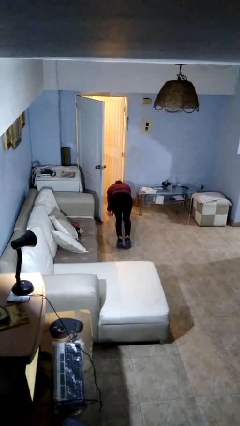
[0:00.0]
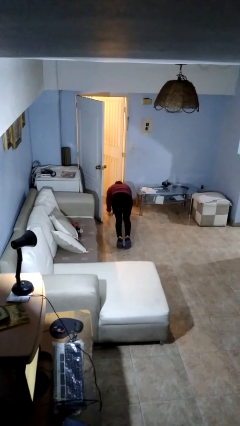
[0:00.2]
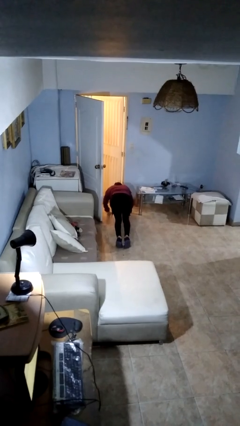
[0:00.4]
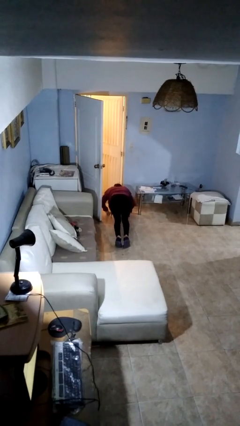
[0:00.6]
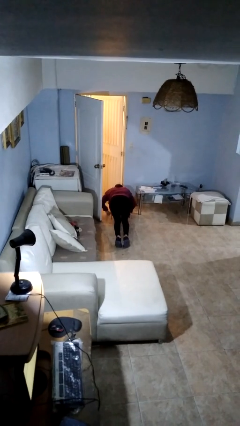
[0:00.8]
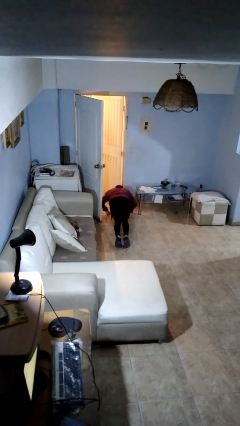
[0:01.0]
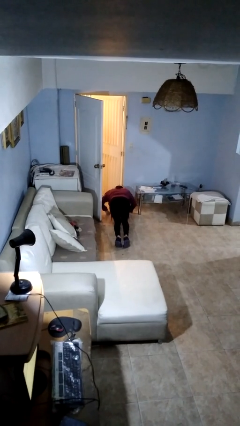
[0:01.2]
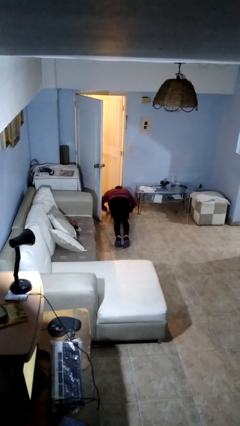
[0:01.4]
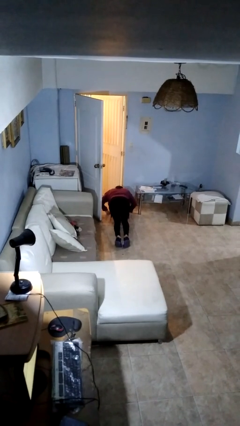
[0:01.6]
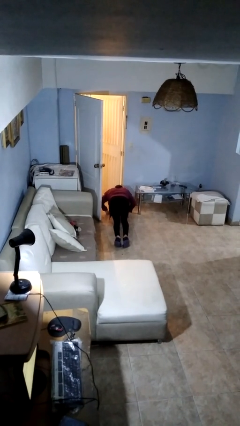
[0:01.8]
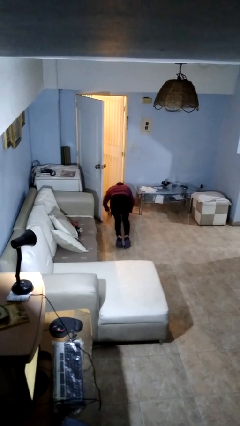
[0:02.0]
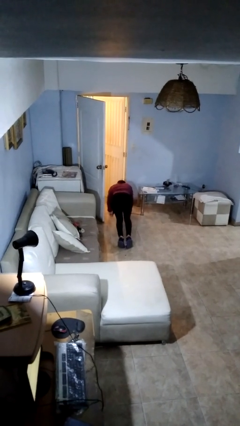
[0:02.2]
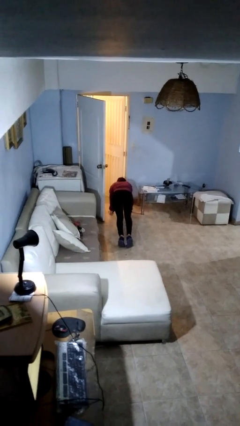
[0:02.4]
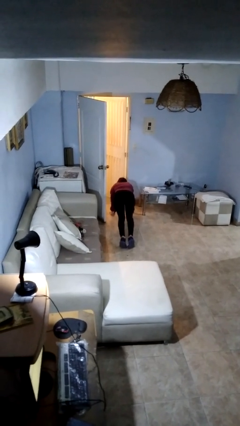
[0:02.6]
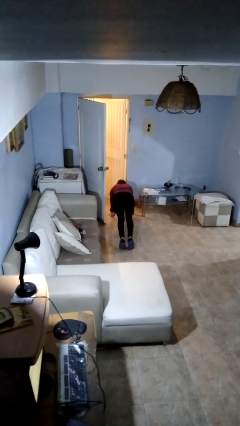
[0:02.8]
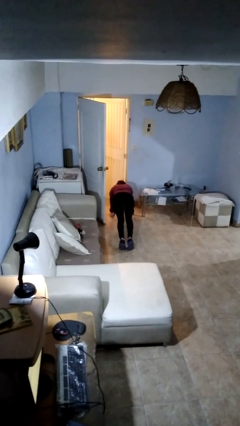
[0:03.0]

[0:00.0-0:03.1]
person exercises with pushup

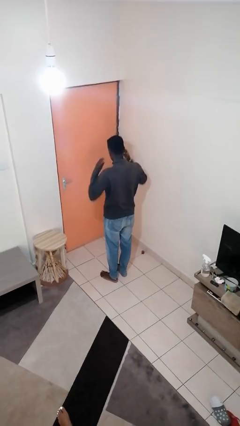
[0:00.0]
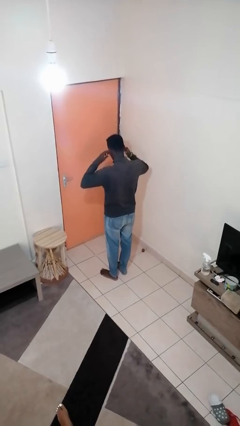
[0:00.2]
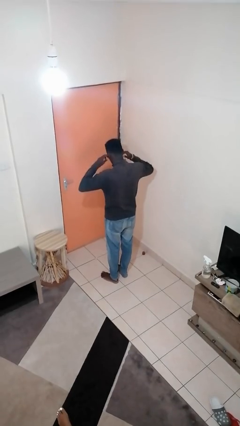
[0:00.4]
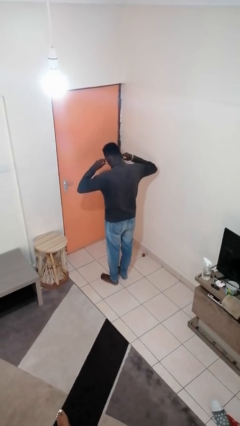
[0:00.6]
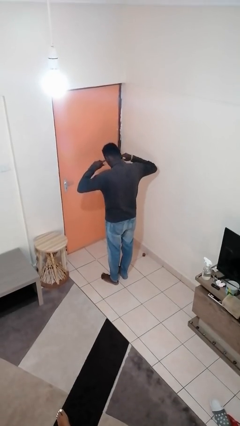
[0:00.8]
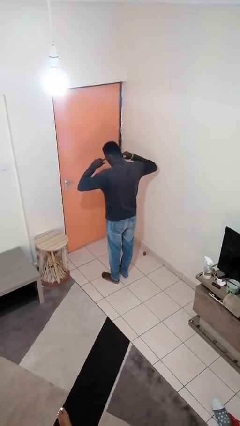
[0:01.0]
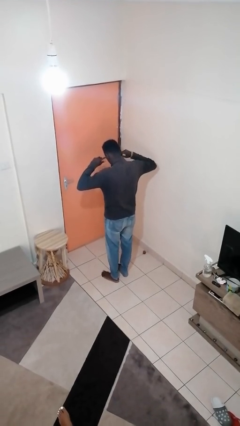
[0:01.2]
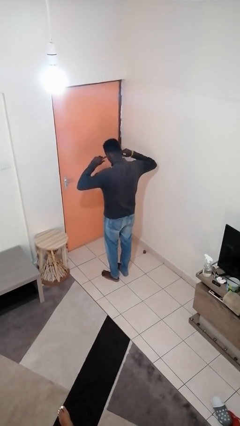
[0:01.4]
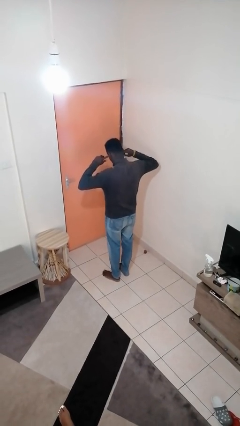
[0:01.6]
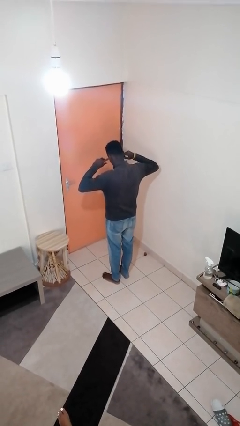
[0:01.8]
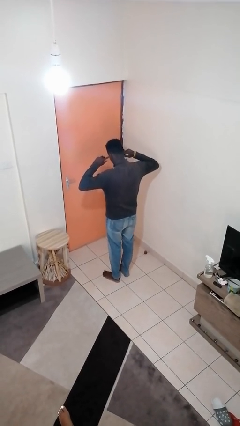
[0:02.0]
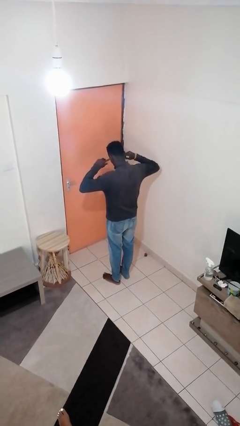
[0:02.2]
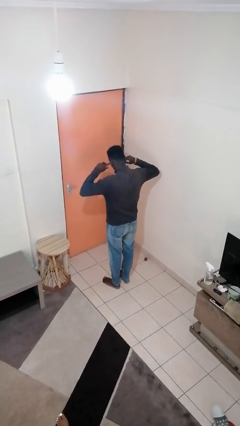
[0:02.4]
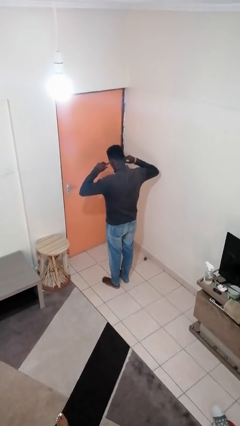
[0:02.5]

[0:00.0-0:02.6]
person puts fingers in ear

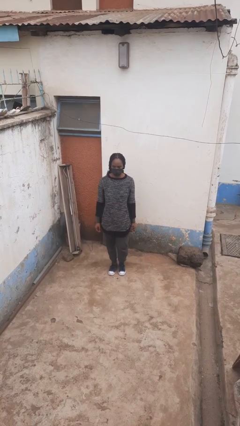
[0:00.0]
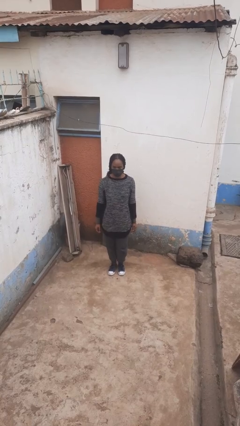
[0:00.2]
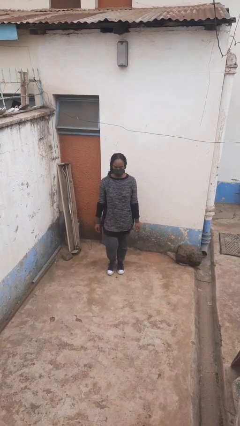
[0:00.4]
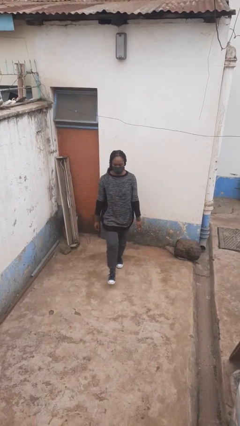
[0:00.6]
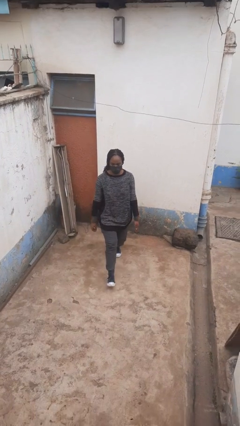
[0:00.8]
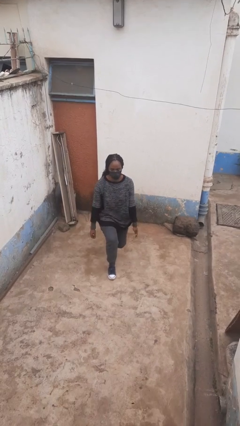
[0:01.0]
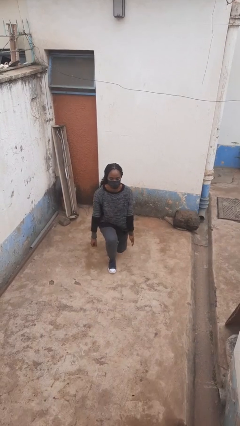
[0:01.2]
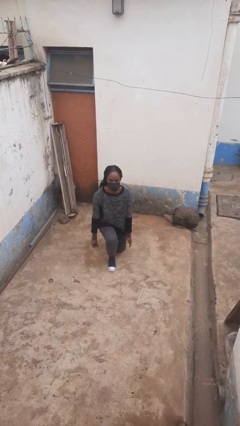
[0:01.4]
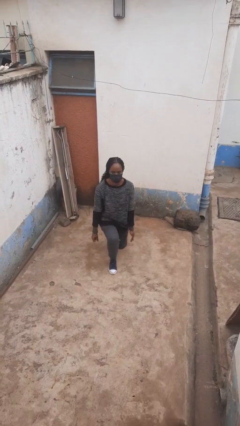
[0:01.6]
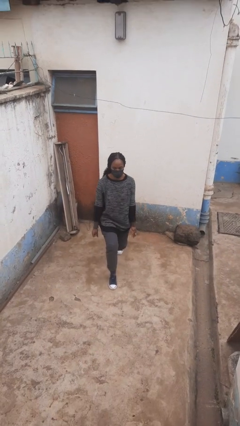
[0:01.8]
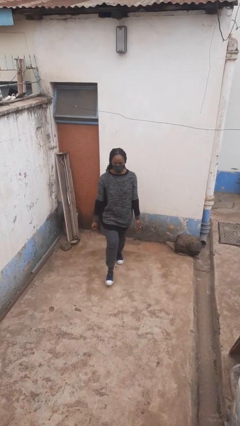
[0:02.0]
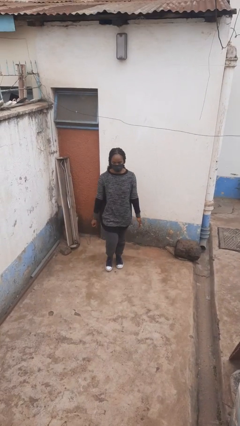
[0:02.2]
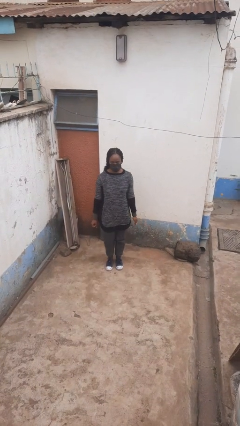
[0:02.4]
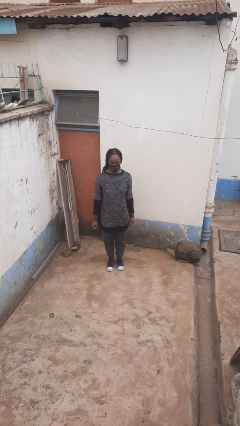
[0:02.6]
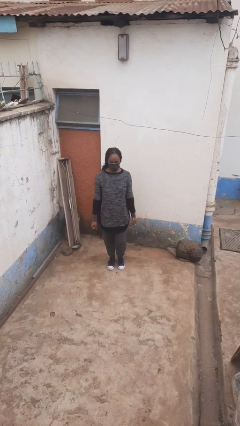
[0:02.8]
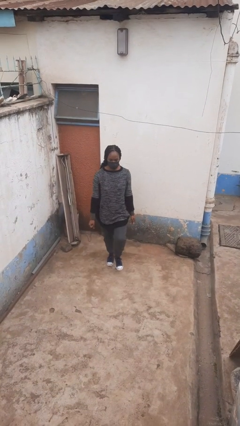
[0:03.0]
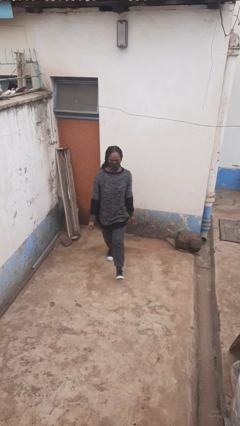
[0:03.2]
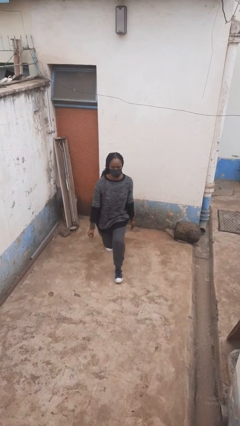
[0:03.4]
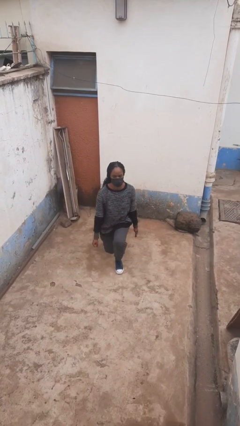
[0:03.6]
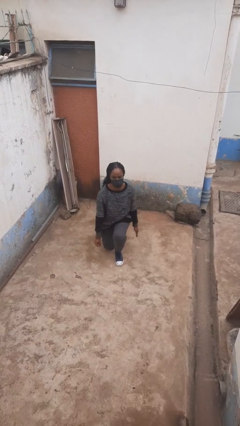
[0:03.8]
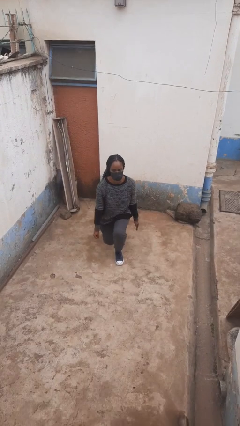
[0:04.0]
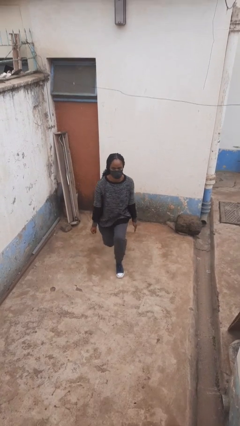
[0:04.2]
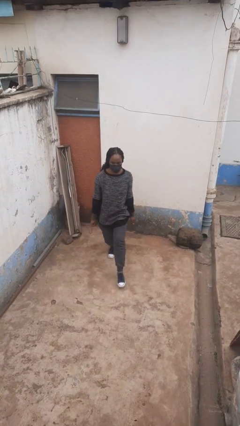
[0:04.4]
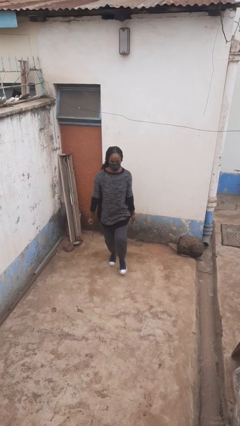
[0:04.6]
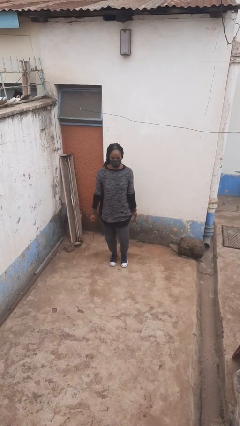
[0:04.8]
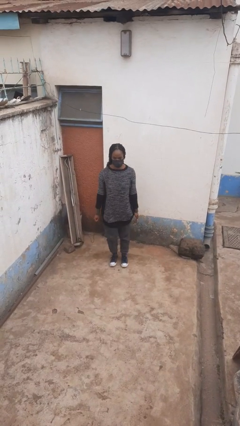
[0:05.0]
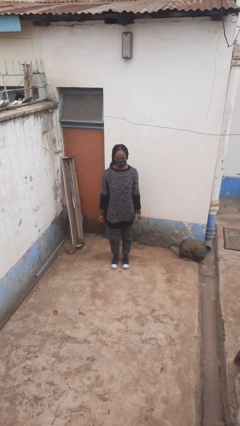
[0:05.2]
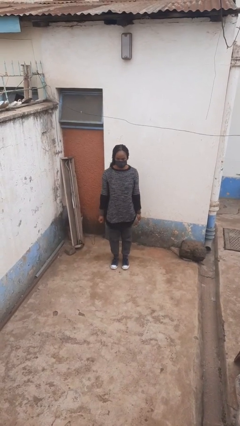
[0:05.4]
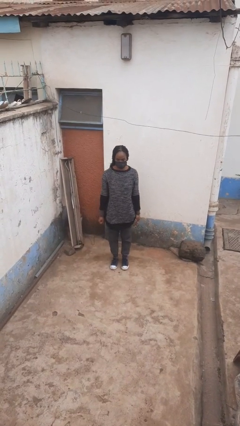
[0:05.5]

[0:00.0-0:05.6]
person exercises with lunges

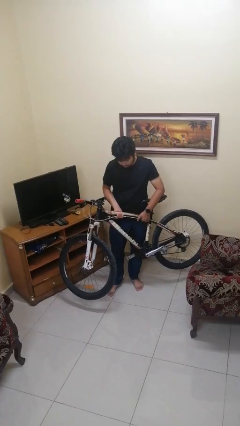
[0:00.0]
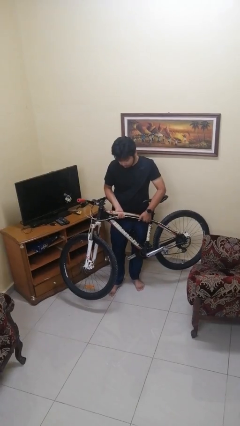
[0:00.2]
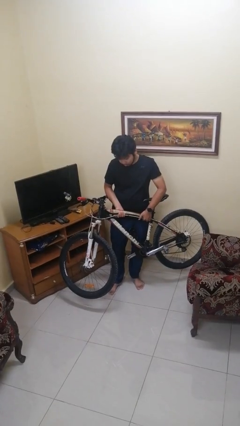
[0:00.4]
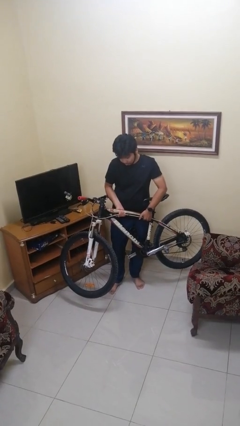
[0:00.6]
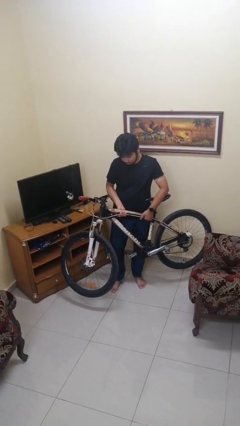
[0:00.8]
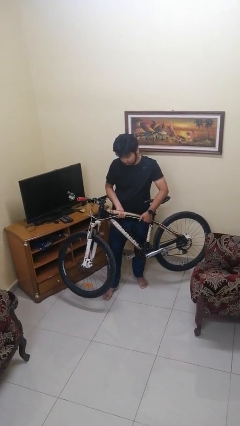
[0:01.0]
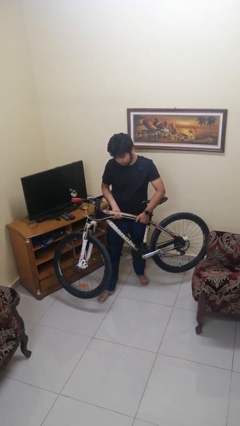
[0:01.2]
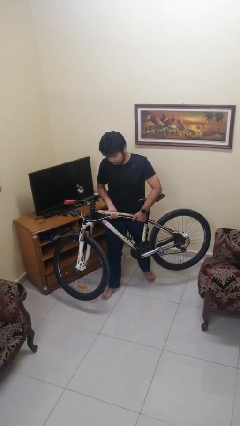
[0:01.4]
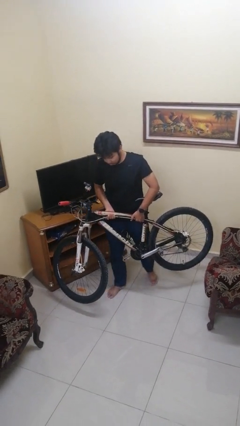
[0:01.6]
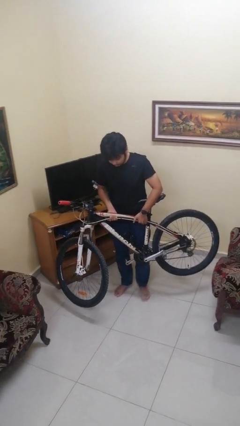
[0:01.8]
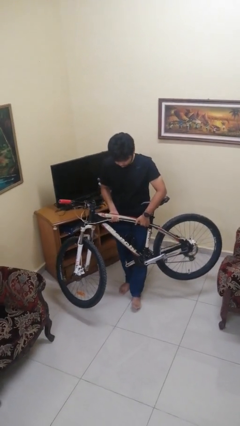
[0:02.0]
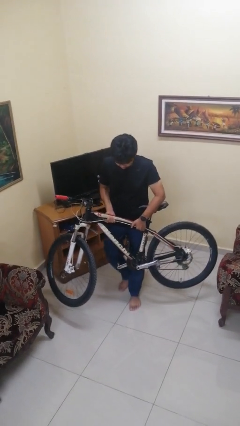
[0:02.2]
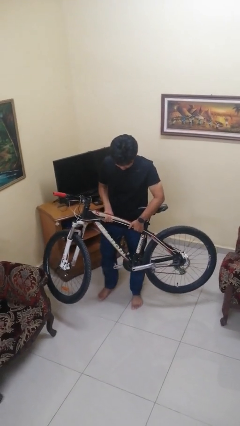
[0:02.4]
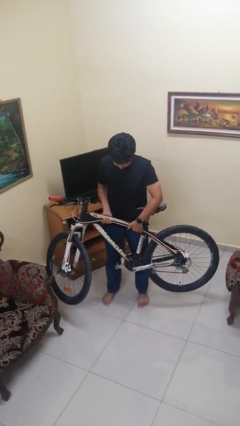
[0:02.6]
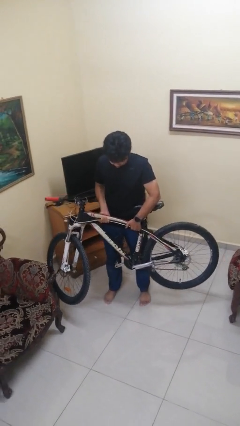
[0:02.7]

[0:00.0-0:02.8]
person carries bicycle

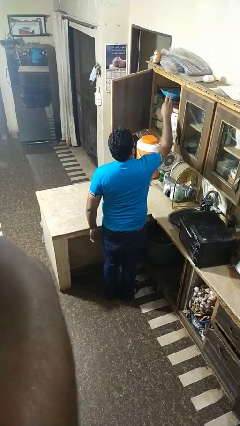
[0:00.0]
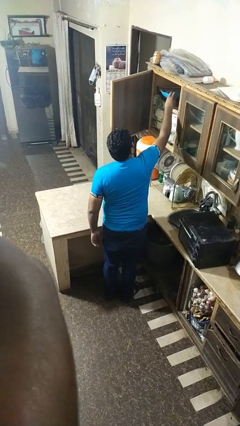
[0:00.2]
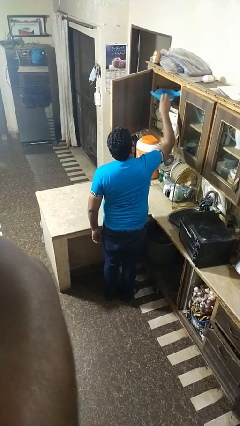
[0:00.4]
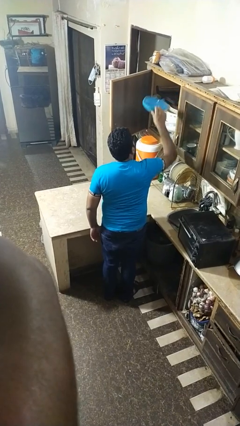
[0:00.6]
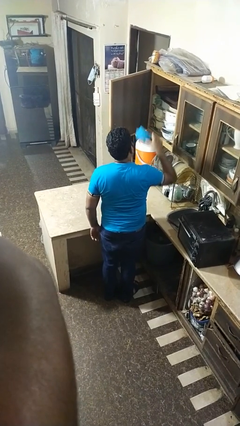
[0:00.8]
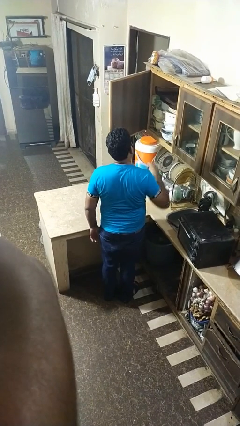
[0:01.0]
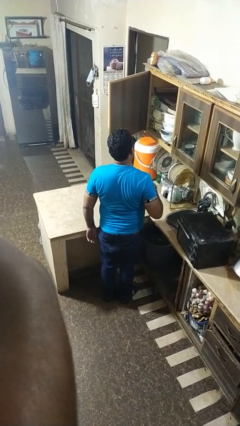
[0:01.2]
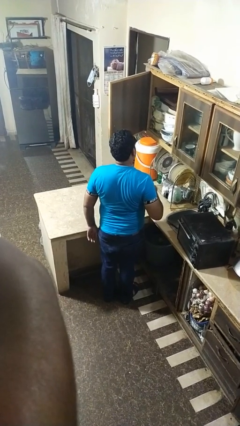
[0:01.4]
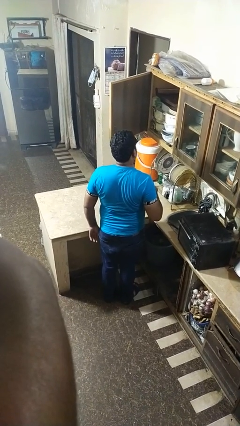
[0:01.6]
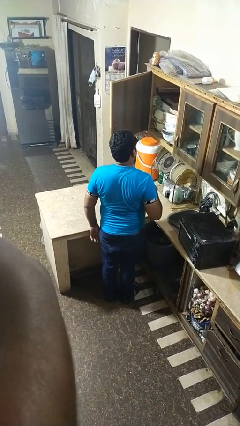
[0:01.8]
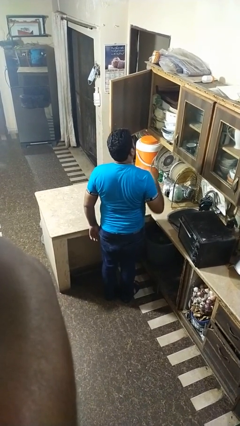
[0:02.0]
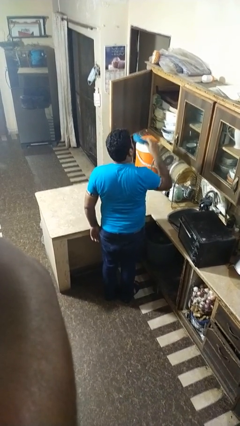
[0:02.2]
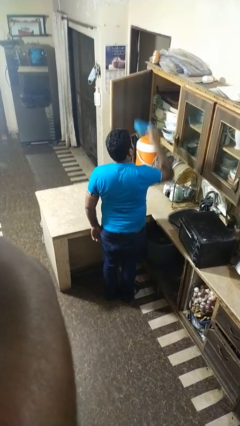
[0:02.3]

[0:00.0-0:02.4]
person puts object in cabinet

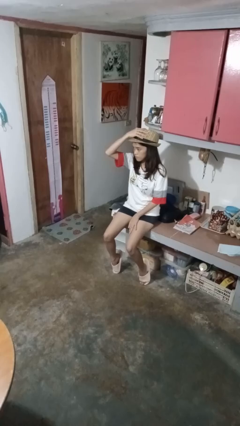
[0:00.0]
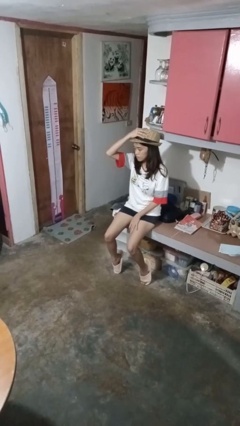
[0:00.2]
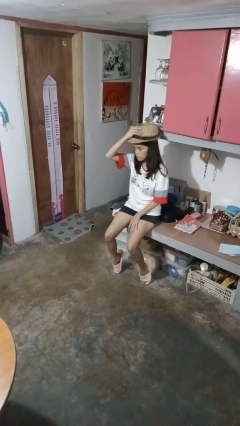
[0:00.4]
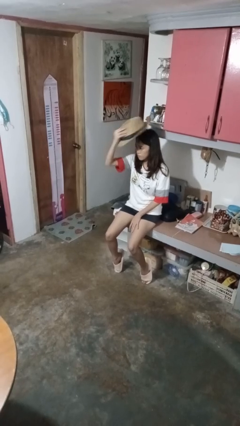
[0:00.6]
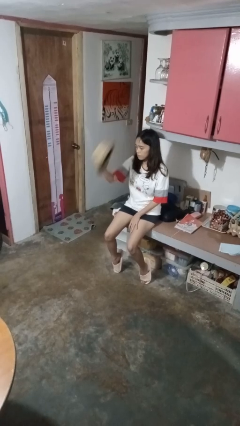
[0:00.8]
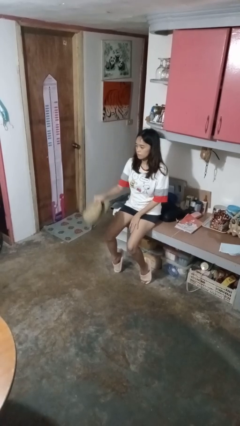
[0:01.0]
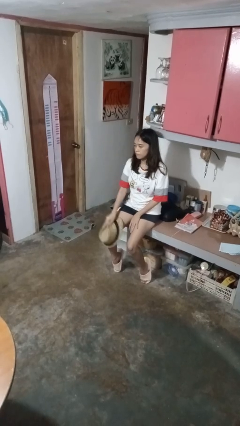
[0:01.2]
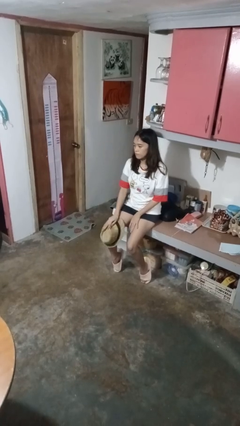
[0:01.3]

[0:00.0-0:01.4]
person takes off hat

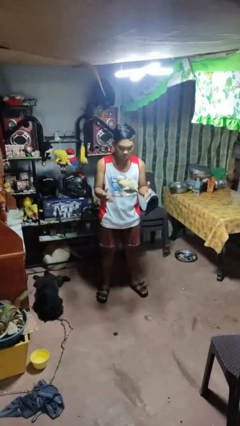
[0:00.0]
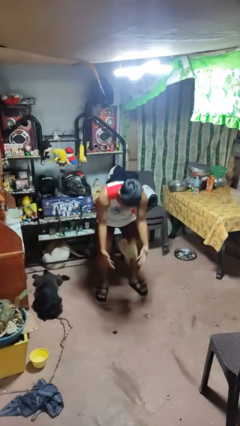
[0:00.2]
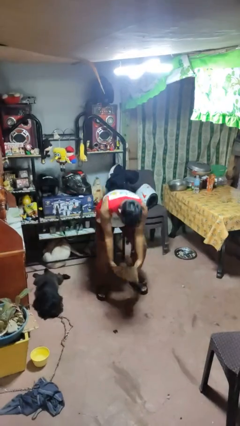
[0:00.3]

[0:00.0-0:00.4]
person drops object
